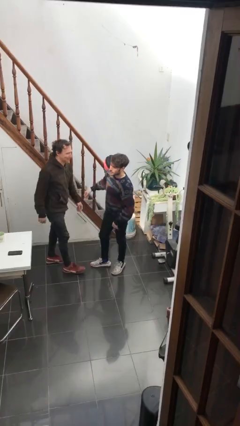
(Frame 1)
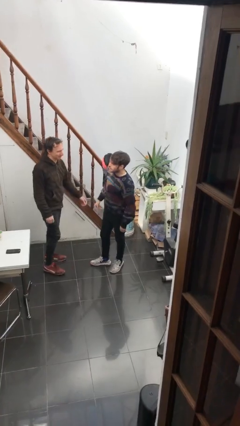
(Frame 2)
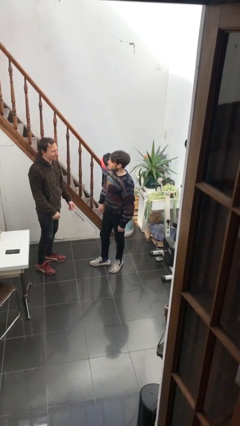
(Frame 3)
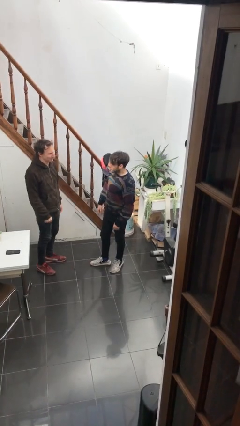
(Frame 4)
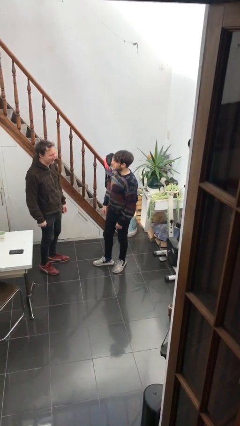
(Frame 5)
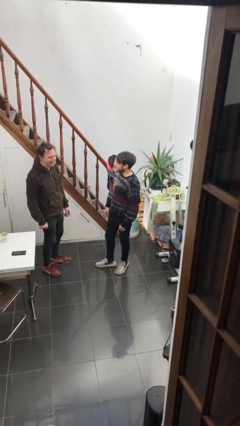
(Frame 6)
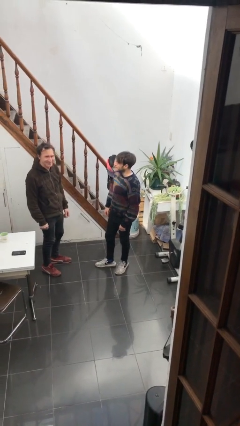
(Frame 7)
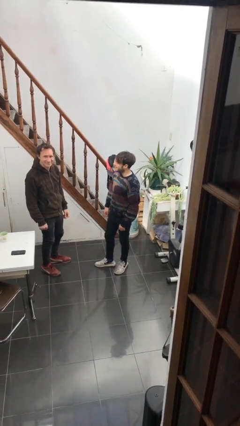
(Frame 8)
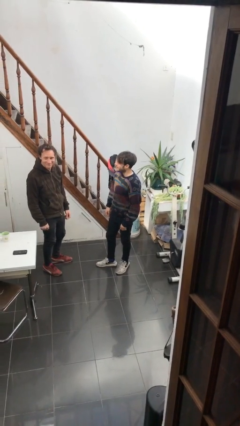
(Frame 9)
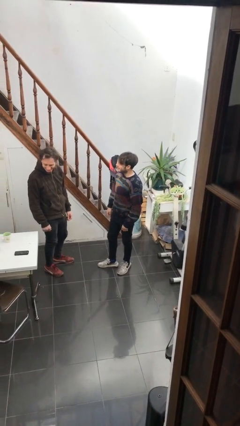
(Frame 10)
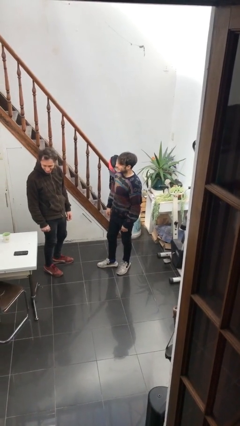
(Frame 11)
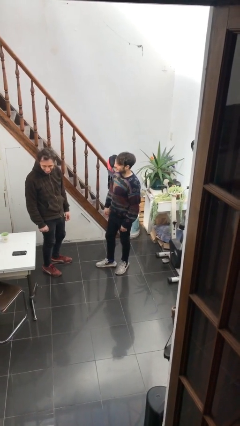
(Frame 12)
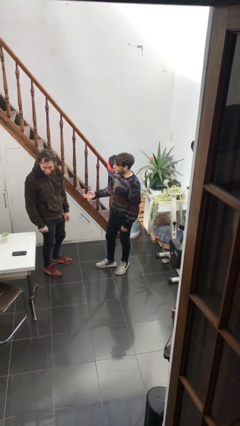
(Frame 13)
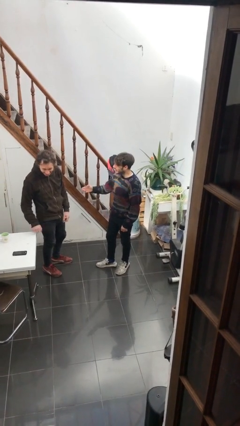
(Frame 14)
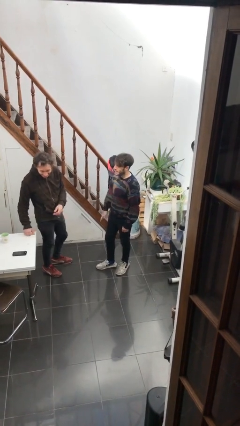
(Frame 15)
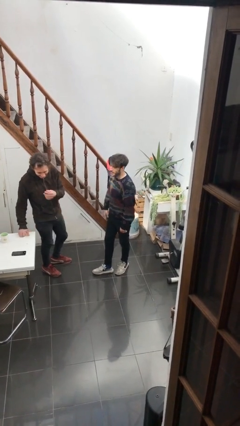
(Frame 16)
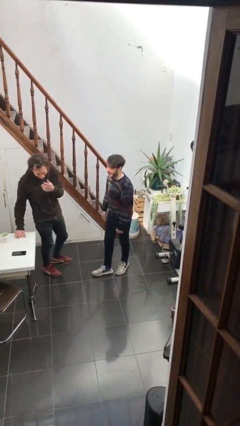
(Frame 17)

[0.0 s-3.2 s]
person talks to person

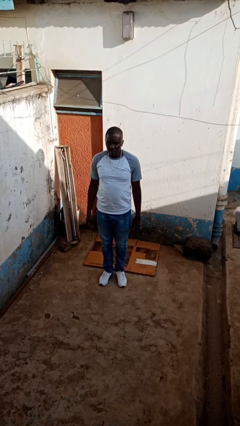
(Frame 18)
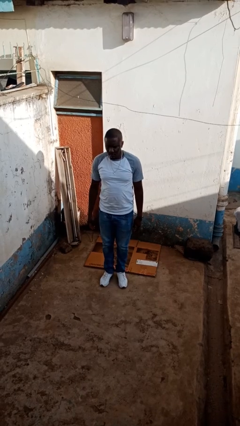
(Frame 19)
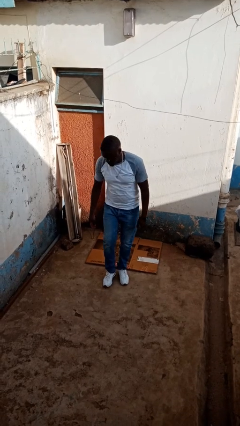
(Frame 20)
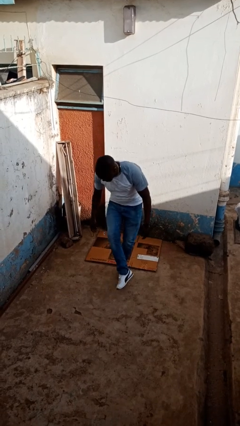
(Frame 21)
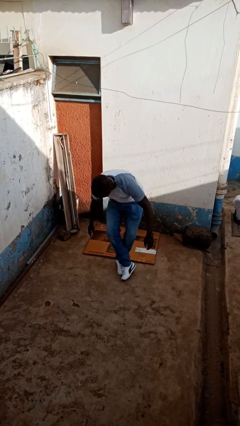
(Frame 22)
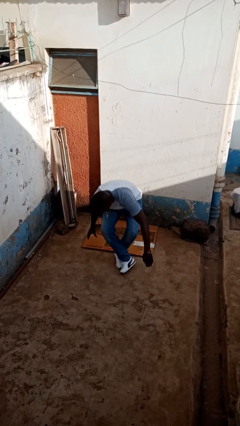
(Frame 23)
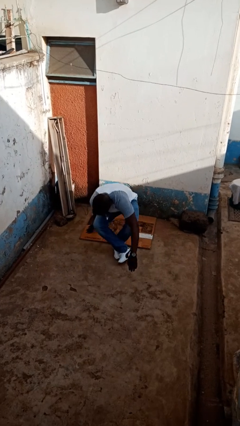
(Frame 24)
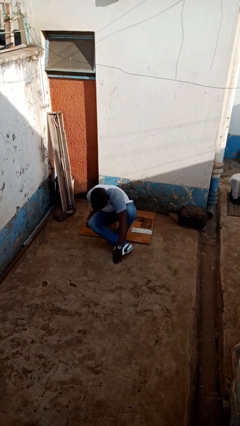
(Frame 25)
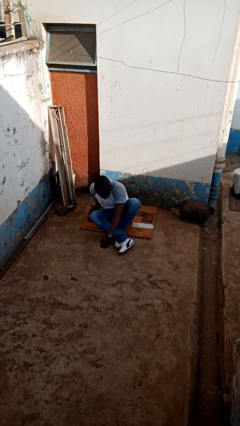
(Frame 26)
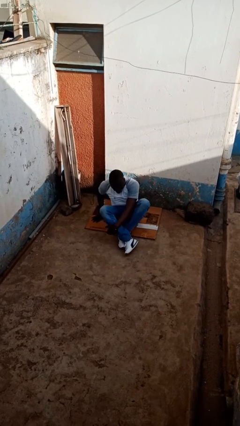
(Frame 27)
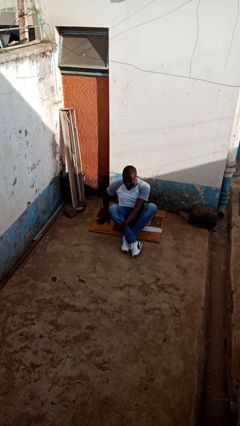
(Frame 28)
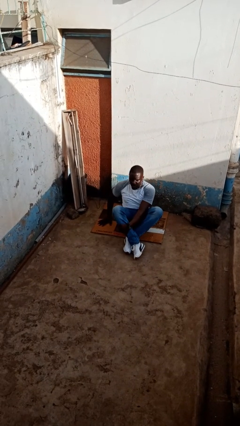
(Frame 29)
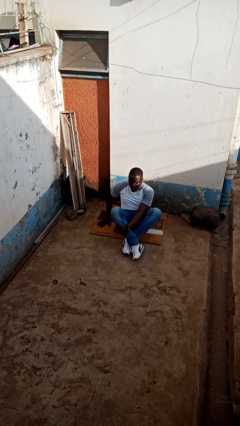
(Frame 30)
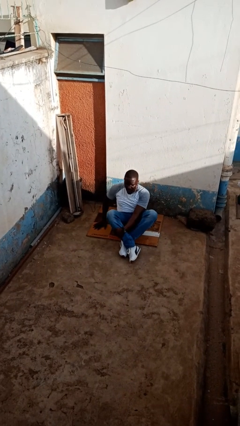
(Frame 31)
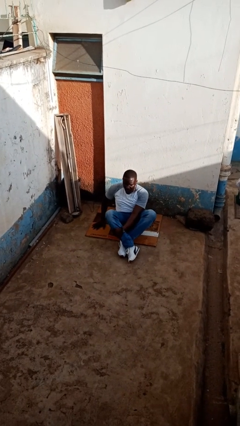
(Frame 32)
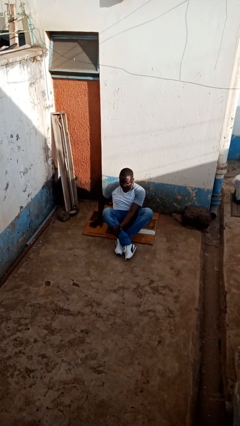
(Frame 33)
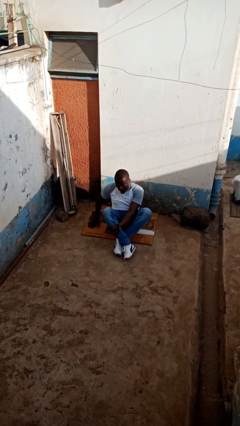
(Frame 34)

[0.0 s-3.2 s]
person sits crisscross

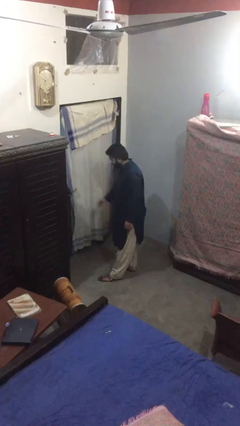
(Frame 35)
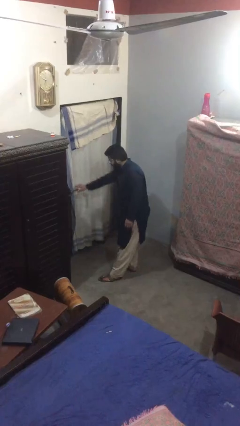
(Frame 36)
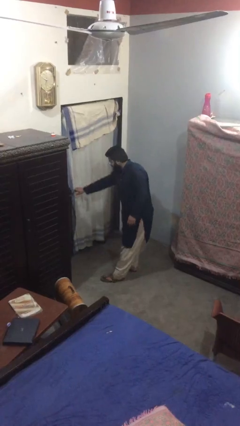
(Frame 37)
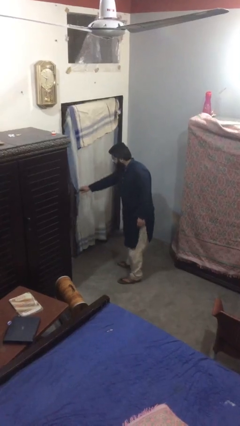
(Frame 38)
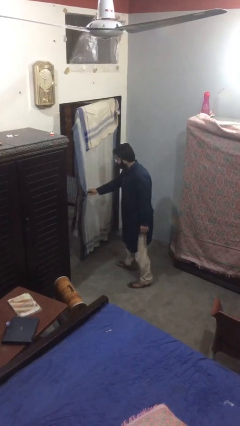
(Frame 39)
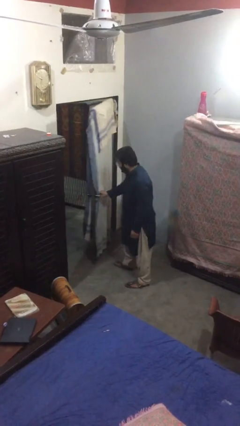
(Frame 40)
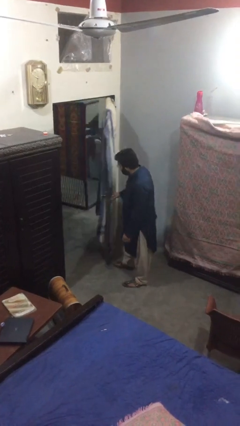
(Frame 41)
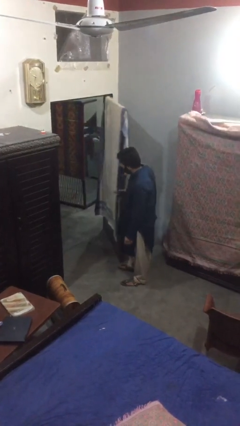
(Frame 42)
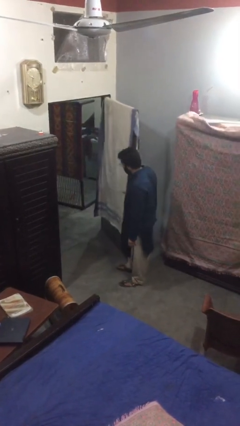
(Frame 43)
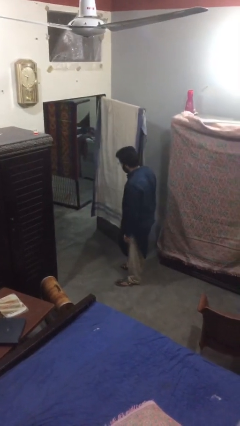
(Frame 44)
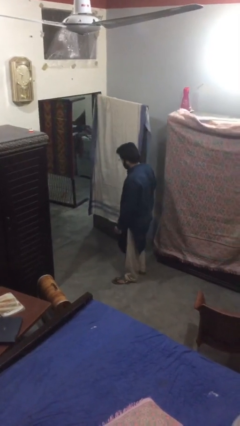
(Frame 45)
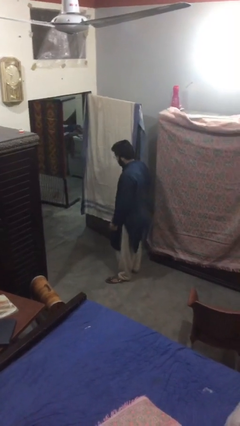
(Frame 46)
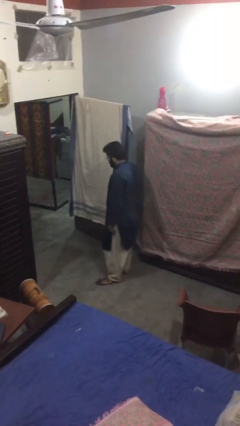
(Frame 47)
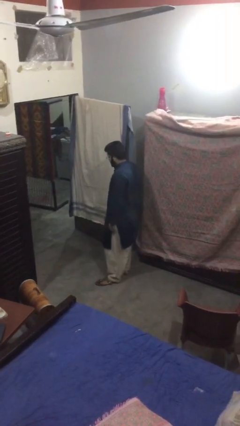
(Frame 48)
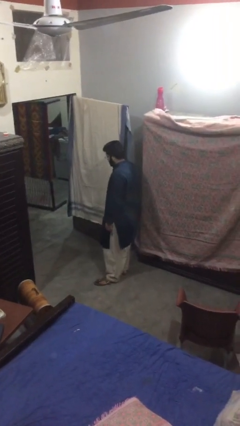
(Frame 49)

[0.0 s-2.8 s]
person opens facility door

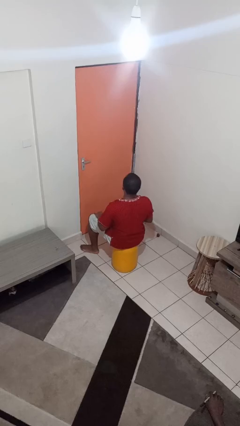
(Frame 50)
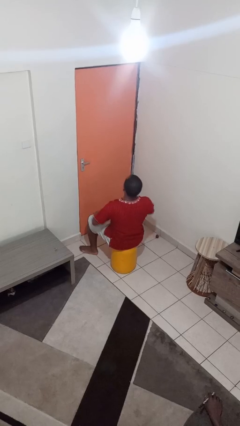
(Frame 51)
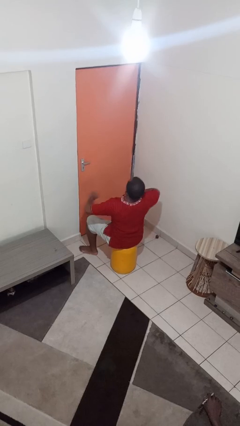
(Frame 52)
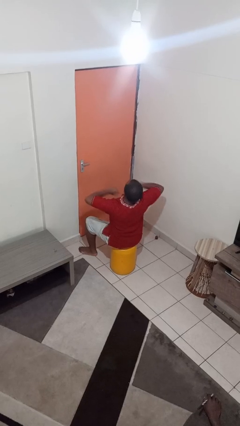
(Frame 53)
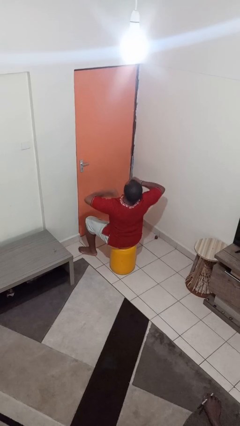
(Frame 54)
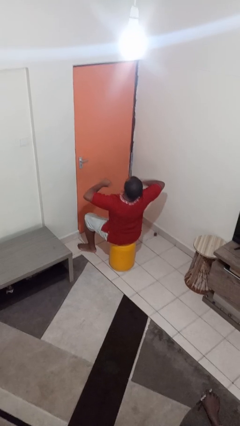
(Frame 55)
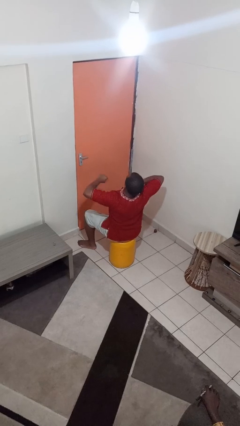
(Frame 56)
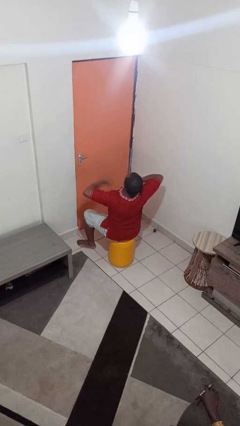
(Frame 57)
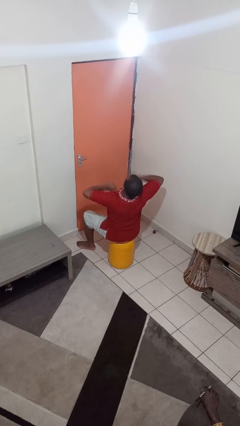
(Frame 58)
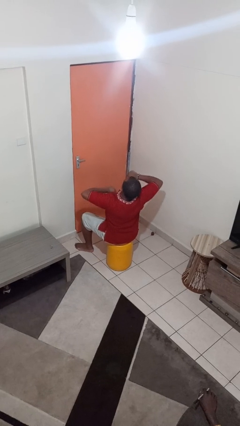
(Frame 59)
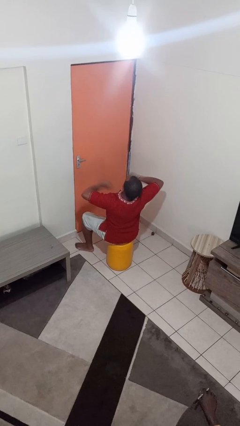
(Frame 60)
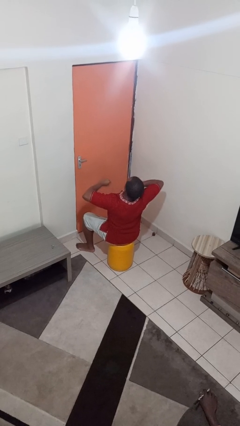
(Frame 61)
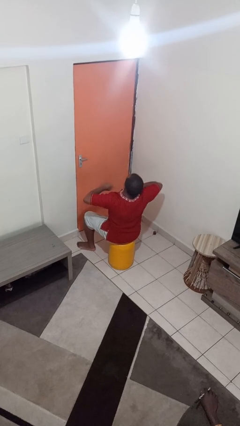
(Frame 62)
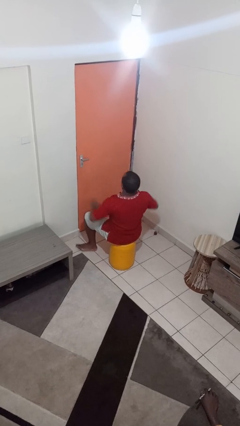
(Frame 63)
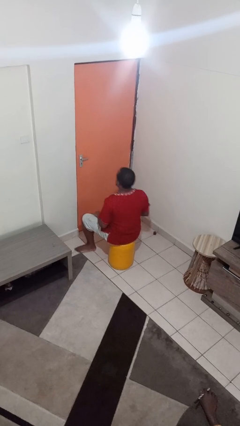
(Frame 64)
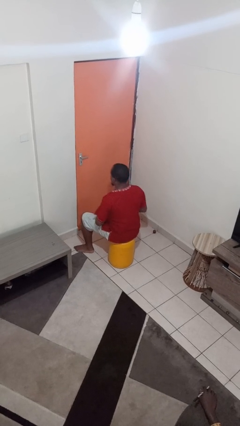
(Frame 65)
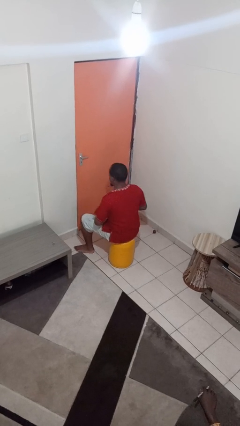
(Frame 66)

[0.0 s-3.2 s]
person drums on chest

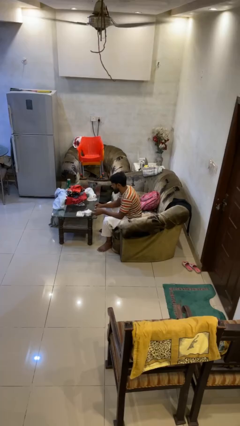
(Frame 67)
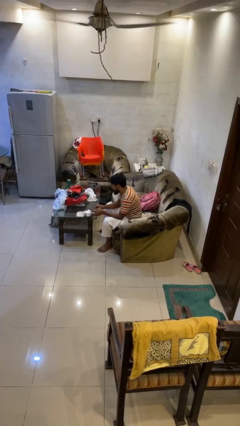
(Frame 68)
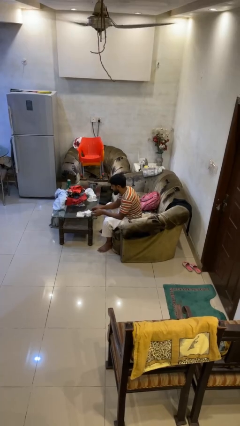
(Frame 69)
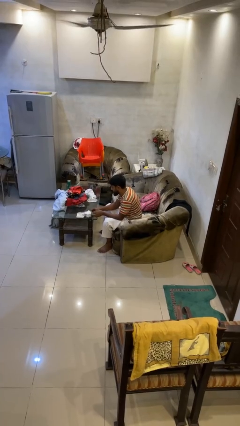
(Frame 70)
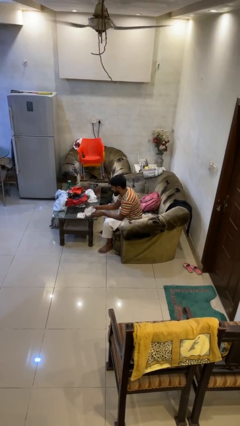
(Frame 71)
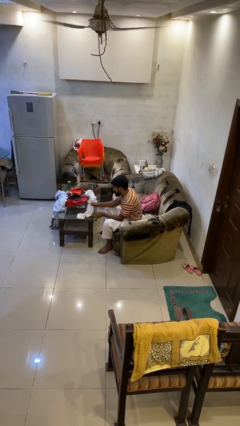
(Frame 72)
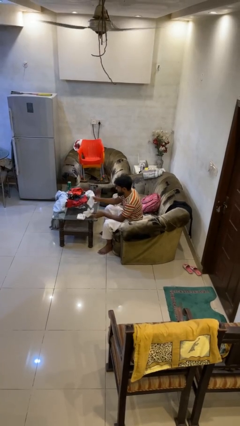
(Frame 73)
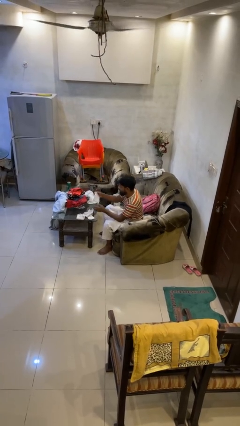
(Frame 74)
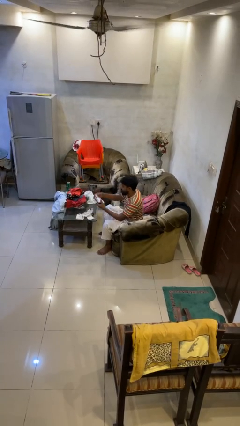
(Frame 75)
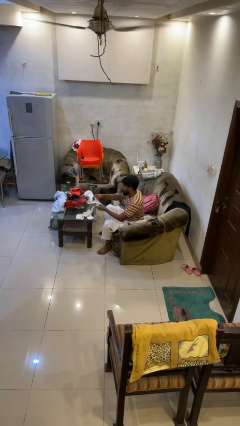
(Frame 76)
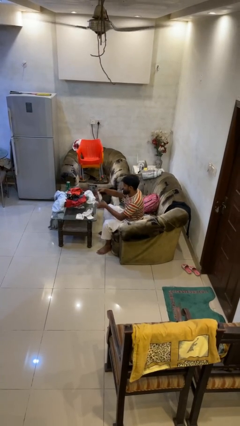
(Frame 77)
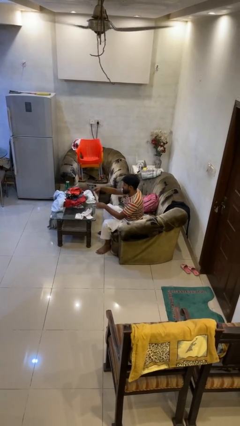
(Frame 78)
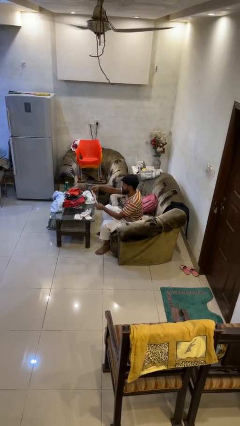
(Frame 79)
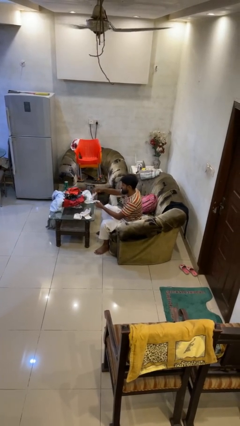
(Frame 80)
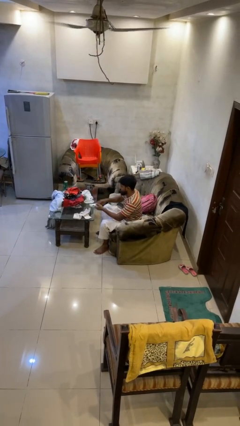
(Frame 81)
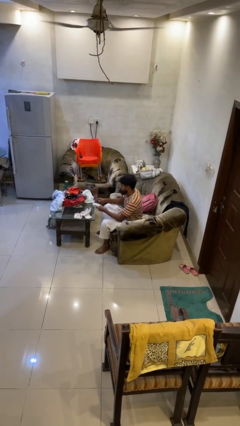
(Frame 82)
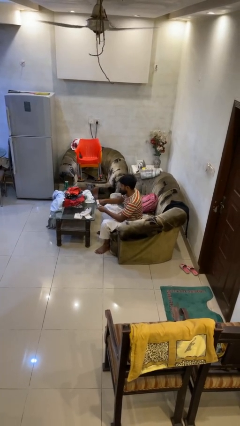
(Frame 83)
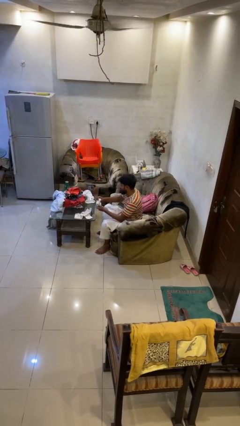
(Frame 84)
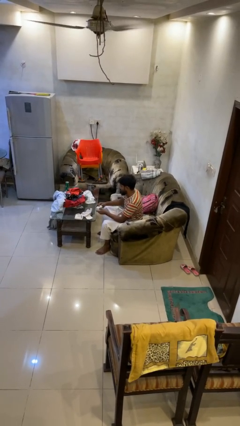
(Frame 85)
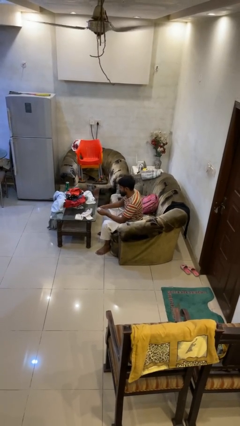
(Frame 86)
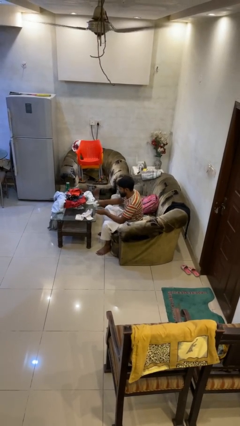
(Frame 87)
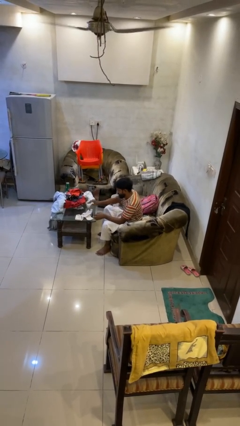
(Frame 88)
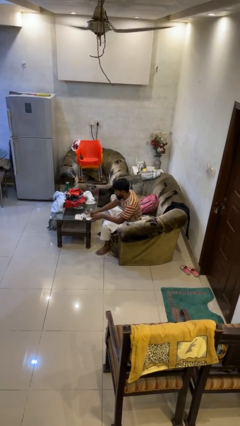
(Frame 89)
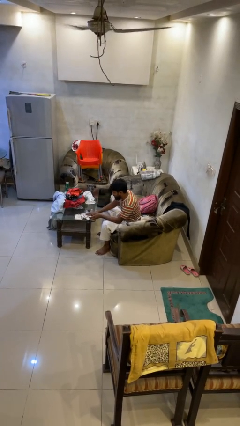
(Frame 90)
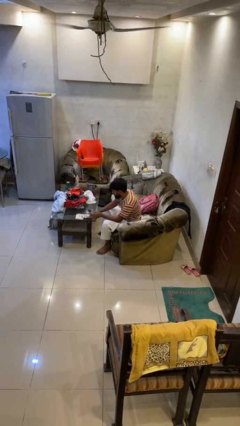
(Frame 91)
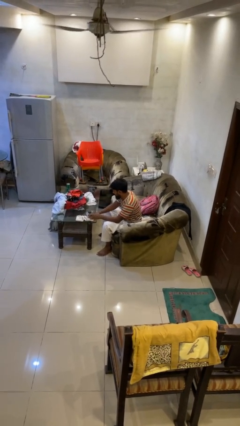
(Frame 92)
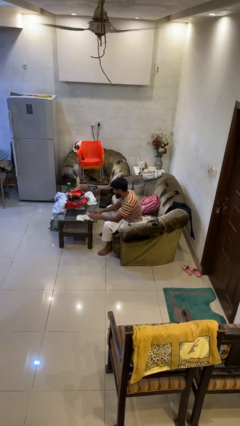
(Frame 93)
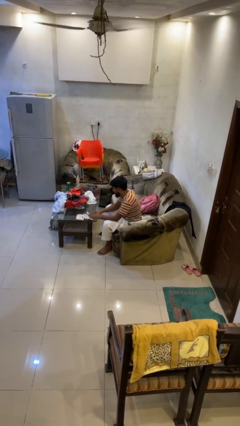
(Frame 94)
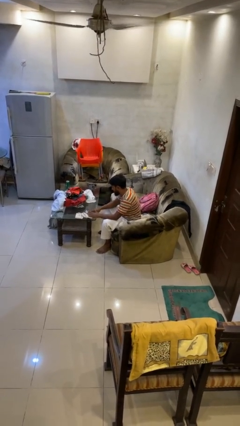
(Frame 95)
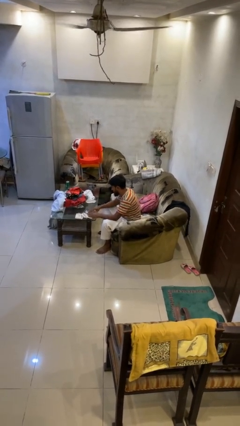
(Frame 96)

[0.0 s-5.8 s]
person folds socks
